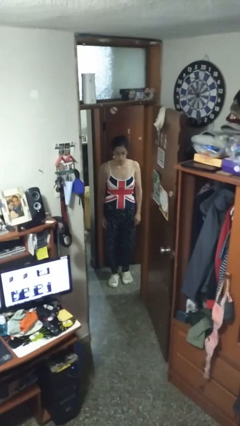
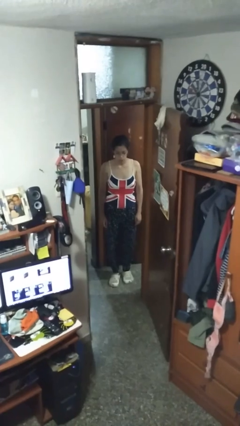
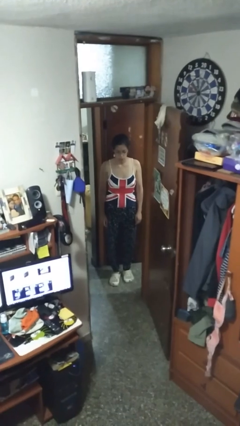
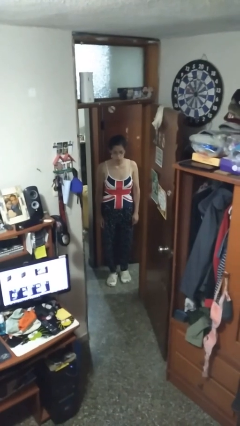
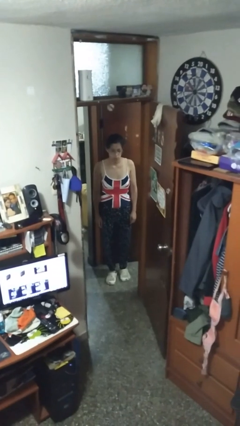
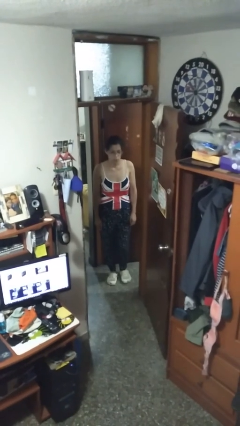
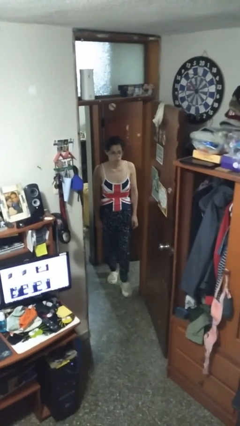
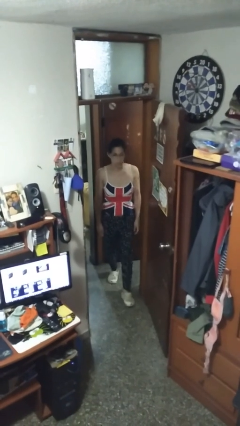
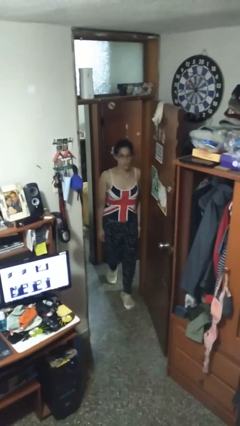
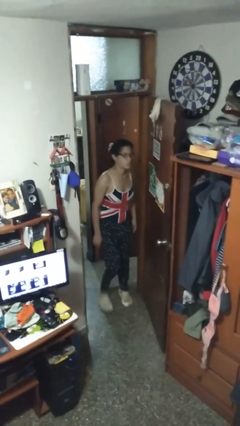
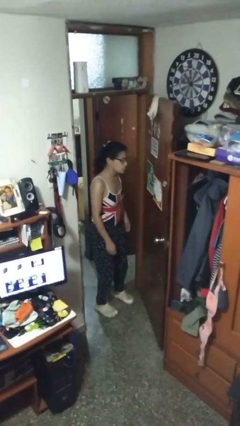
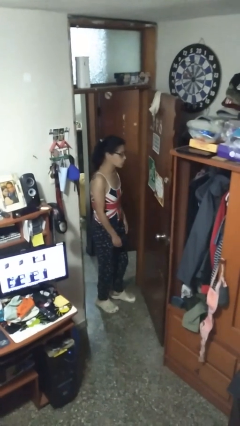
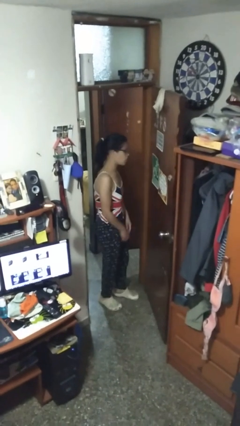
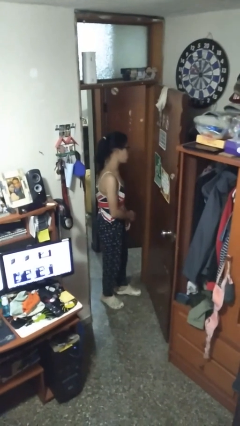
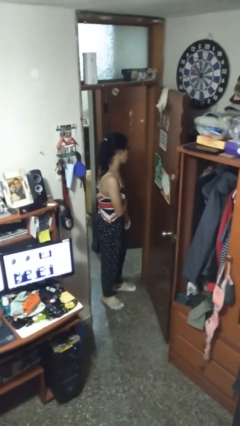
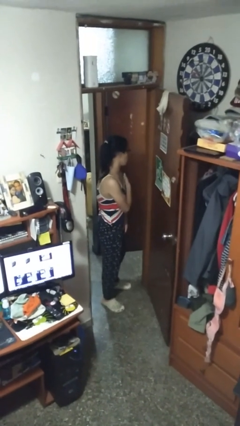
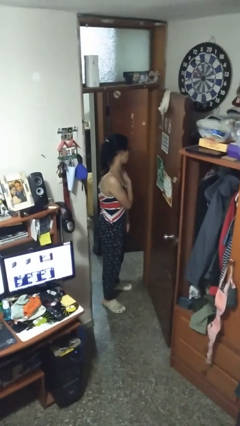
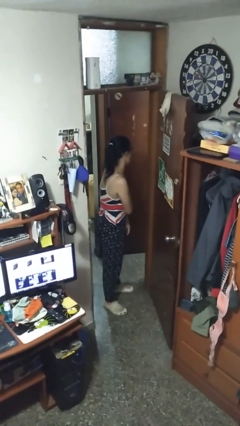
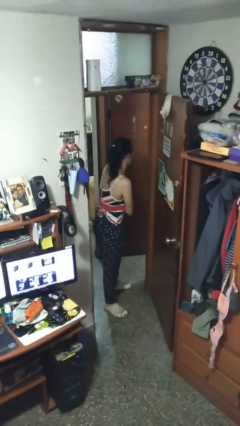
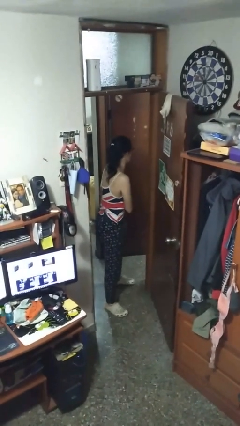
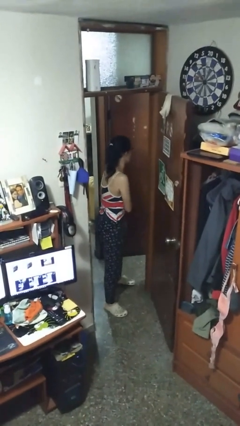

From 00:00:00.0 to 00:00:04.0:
person bumps into wall

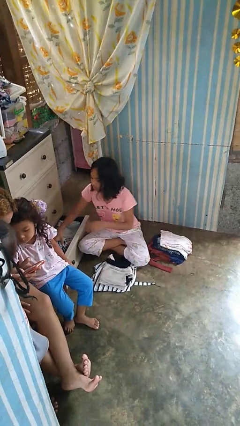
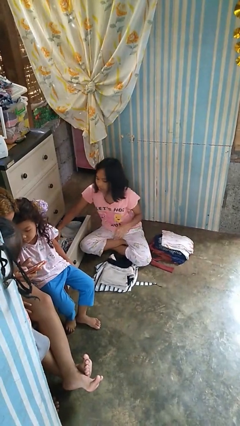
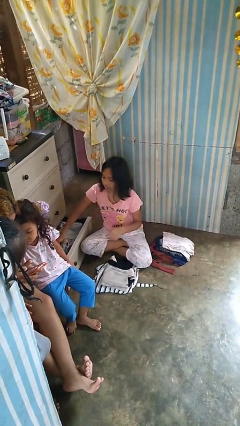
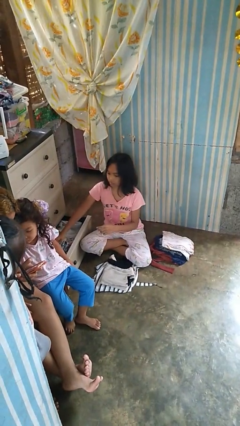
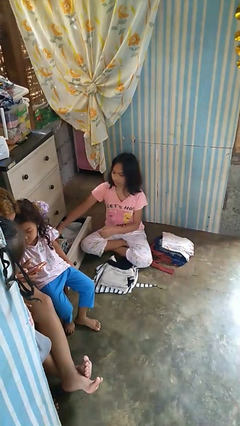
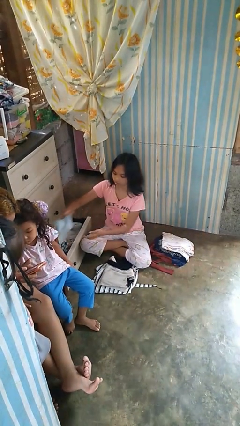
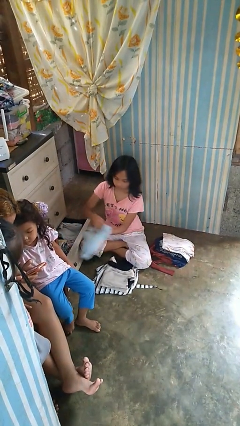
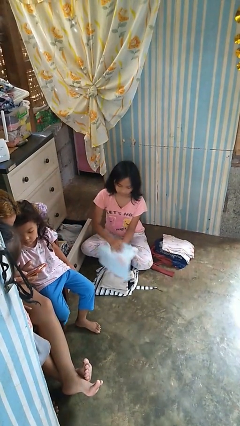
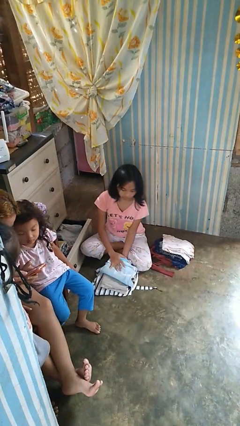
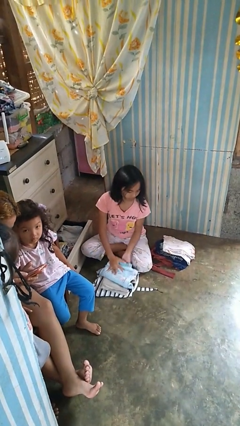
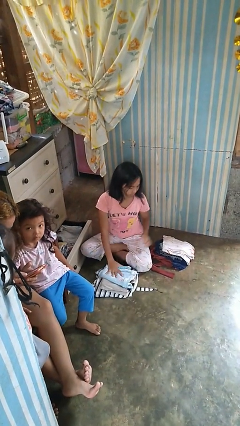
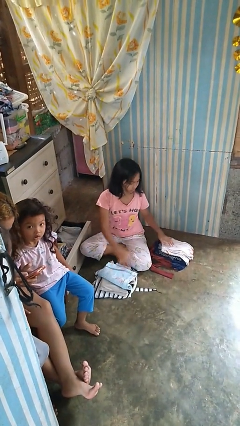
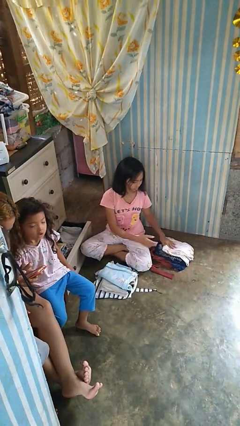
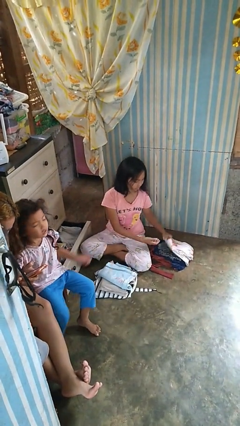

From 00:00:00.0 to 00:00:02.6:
person takes clothes from dresser

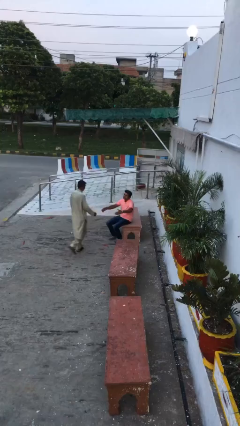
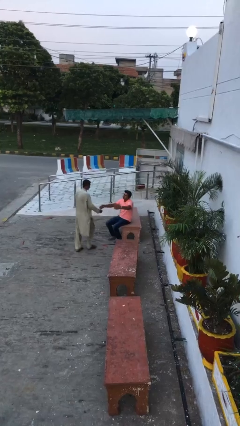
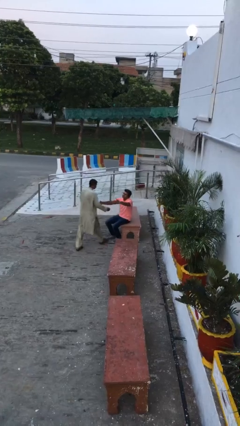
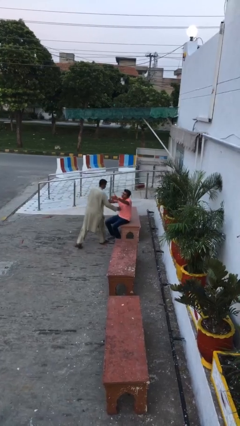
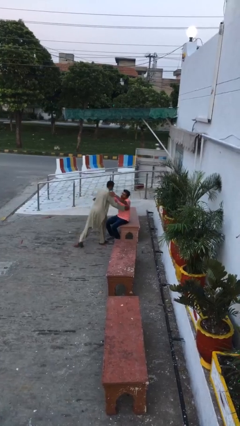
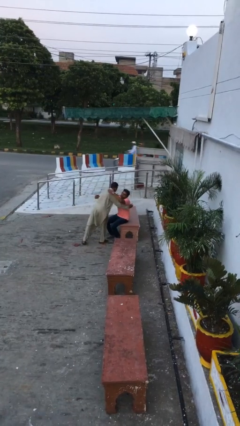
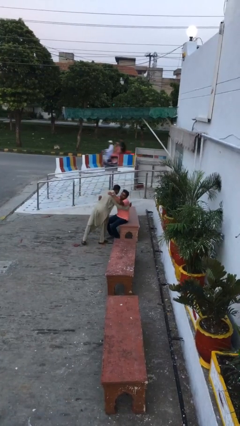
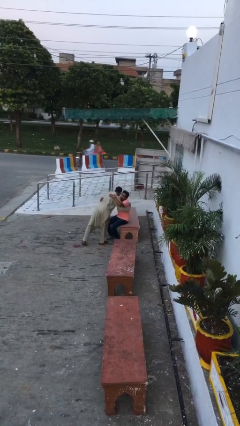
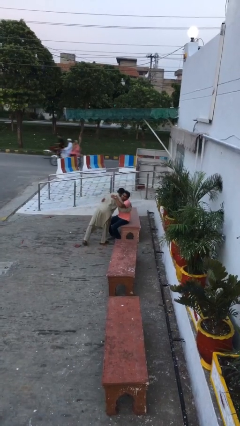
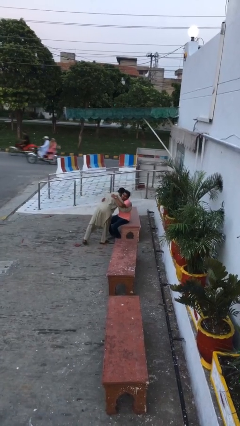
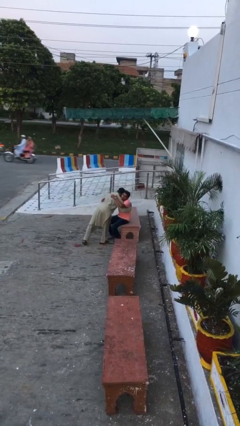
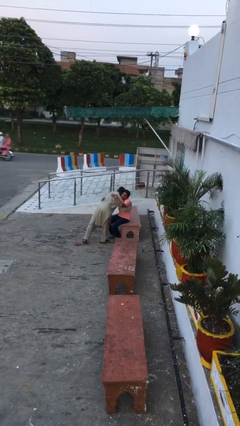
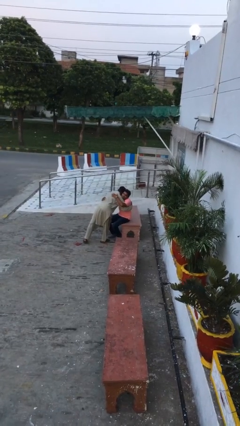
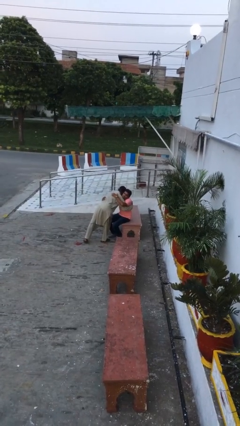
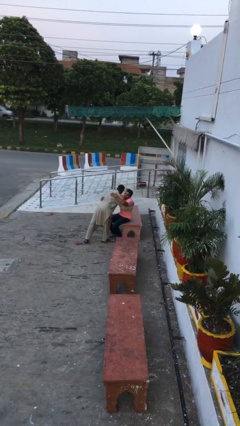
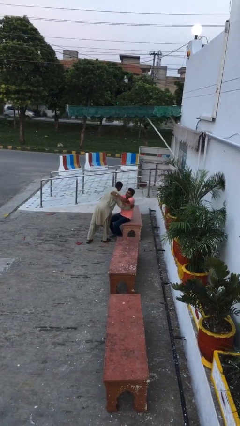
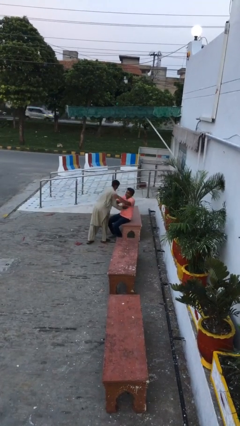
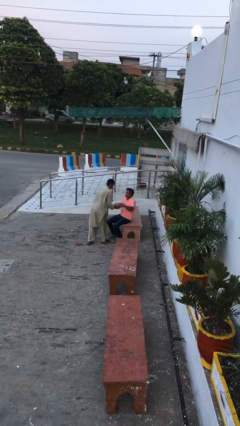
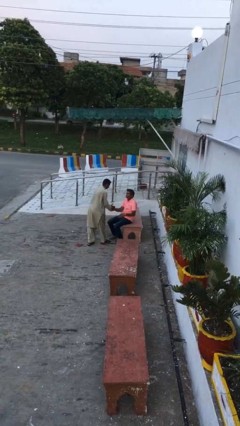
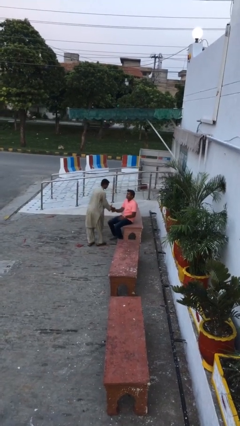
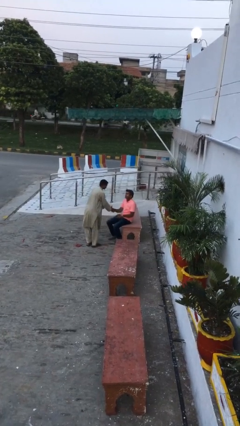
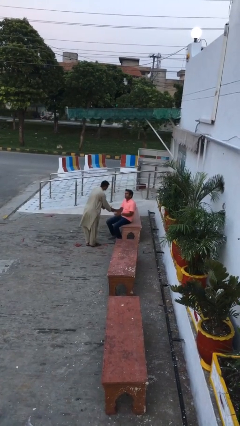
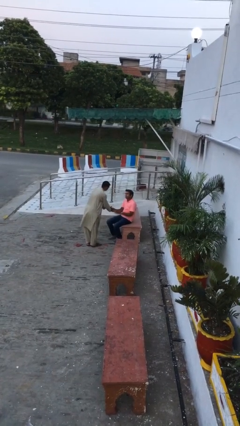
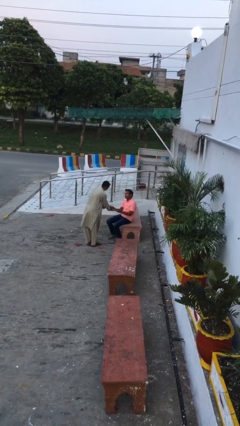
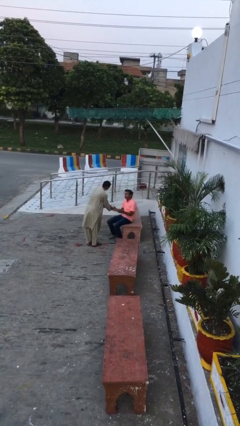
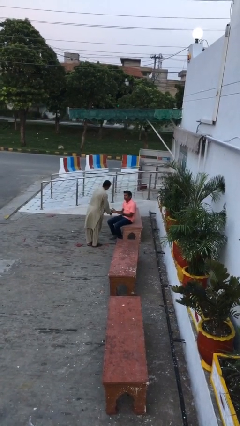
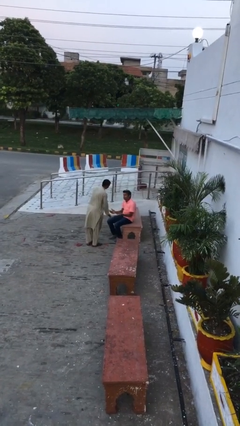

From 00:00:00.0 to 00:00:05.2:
person embraces person

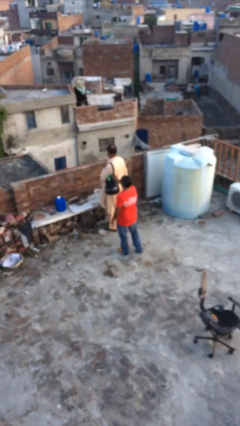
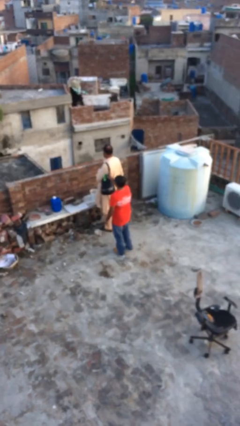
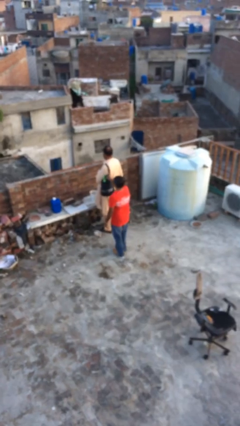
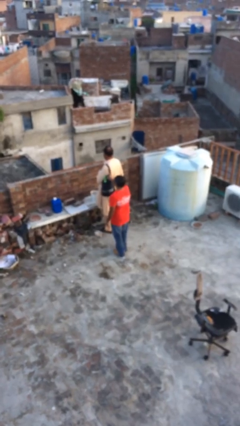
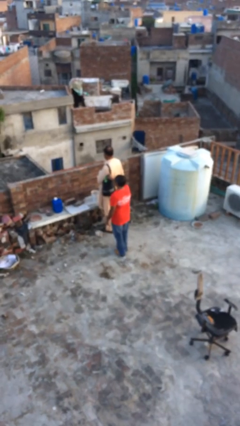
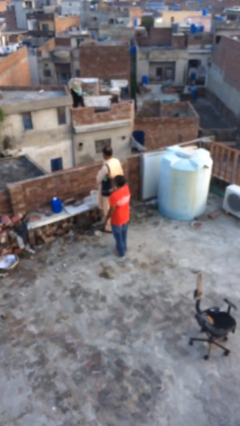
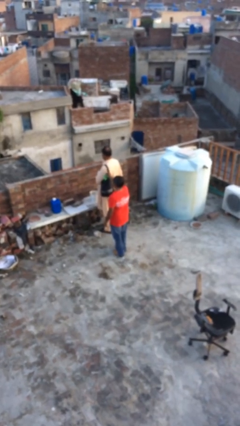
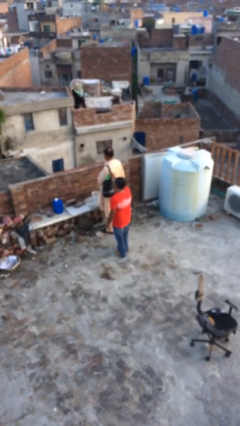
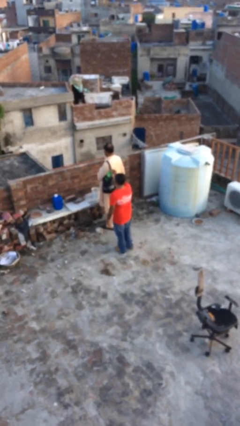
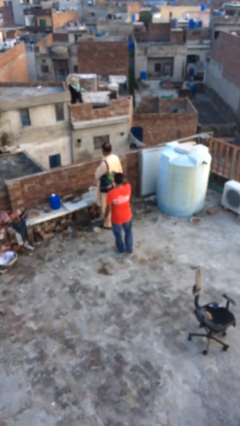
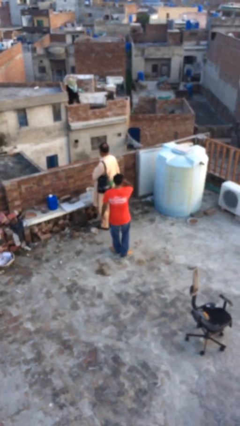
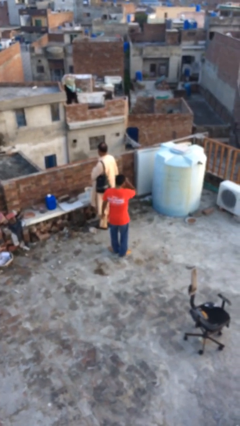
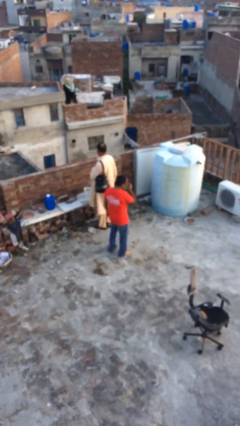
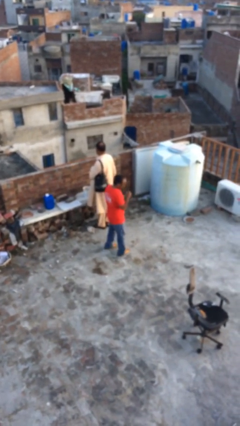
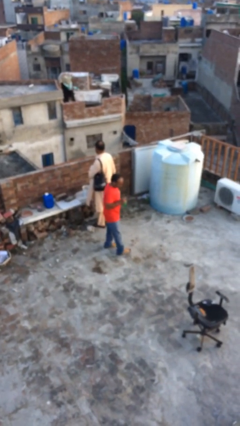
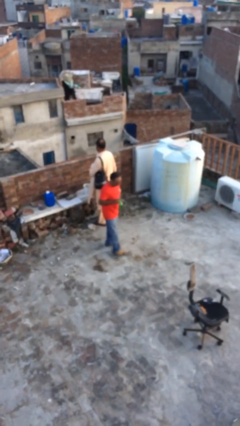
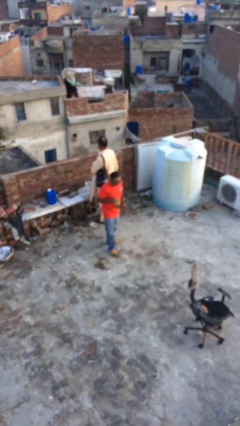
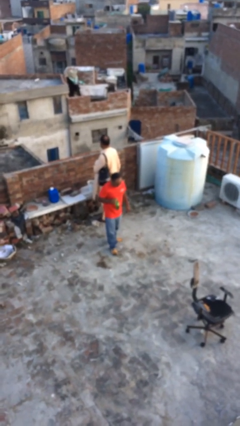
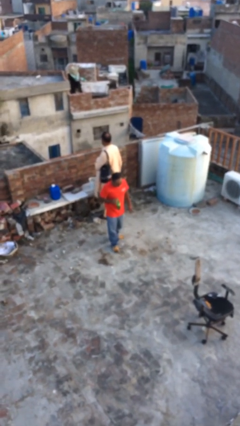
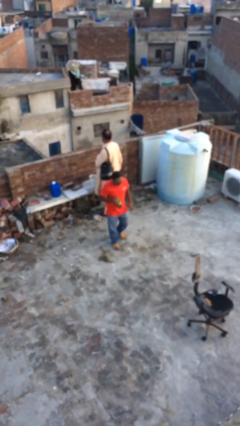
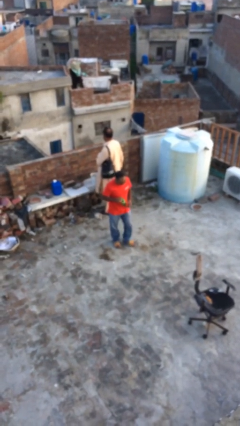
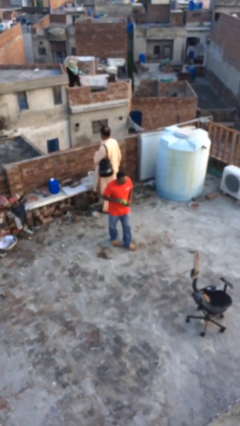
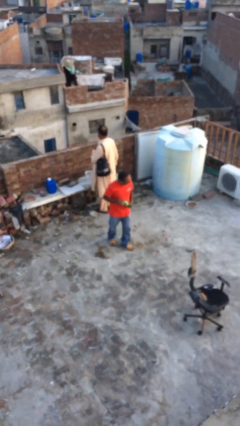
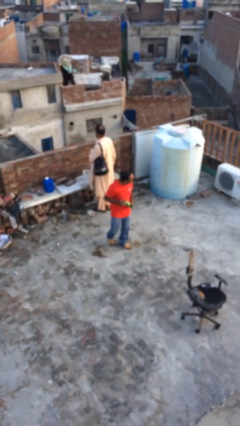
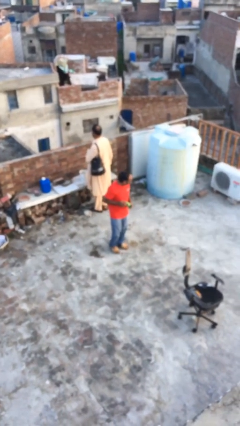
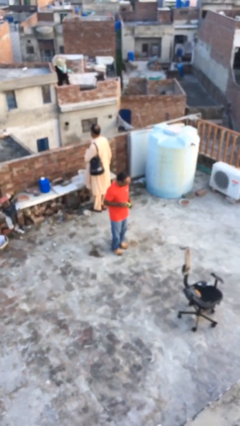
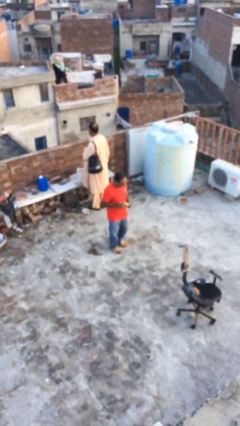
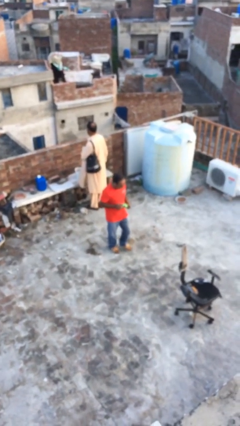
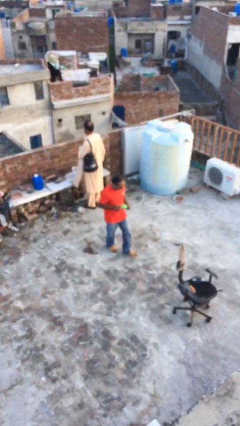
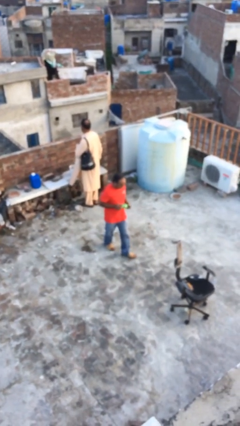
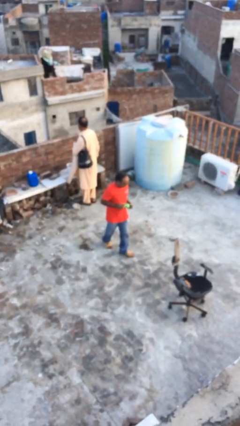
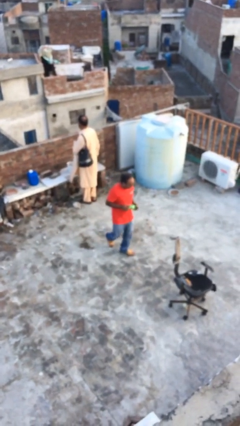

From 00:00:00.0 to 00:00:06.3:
person steals object from person
